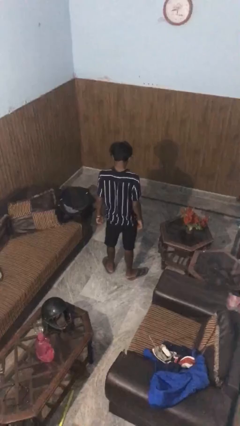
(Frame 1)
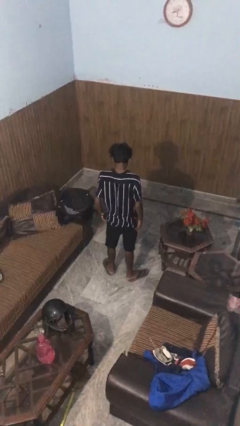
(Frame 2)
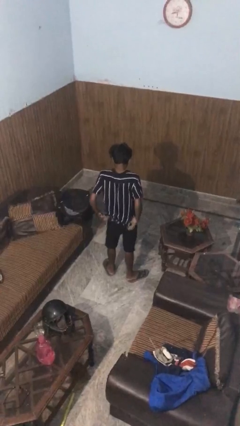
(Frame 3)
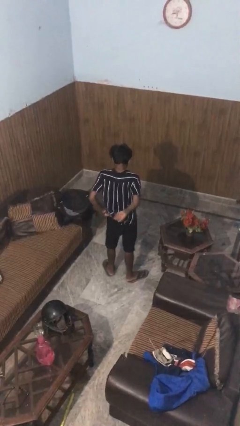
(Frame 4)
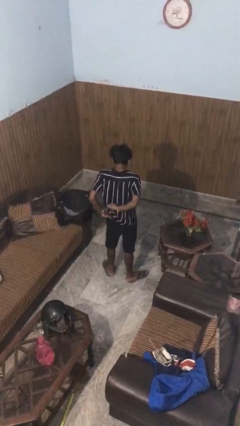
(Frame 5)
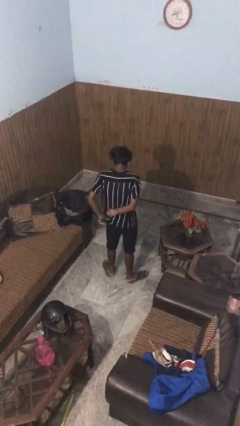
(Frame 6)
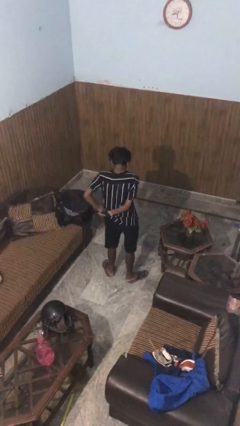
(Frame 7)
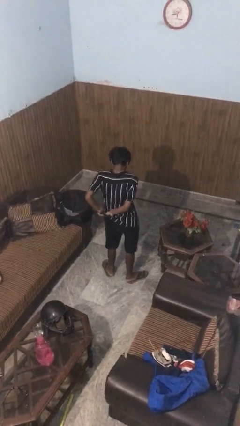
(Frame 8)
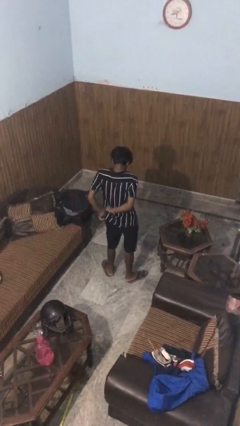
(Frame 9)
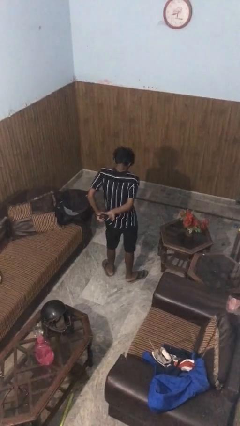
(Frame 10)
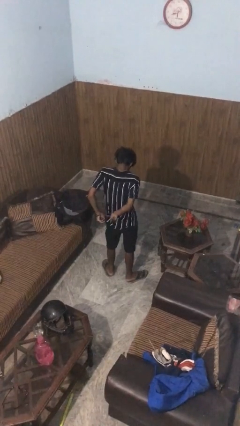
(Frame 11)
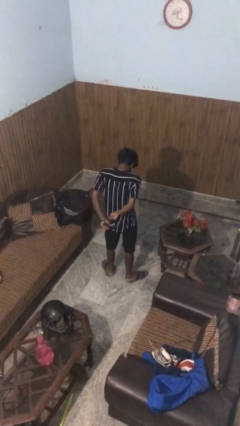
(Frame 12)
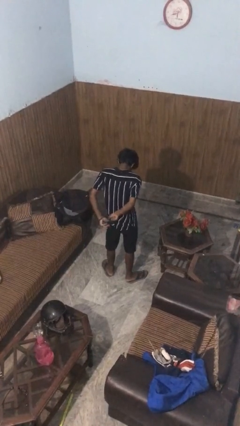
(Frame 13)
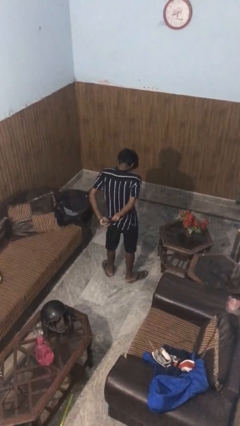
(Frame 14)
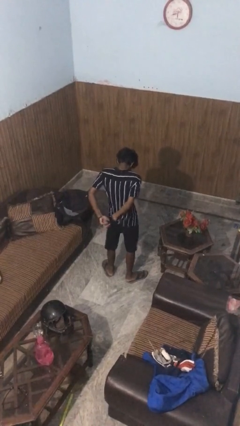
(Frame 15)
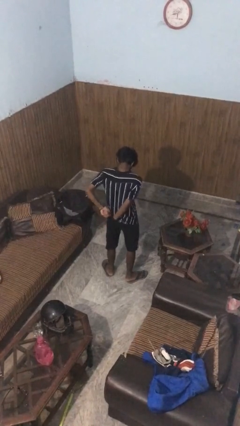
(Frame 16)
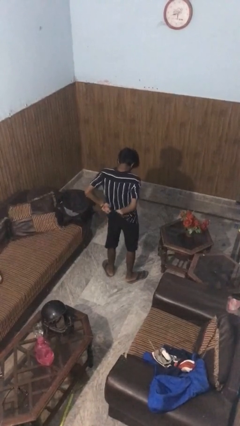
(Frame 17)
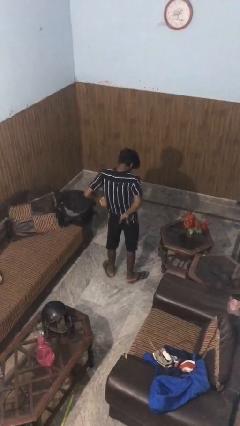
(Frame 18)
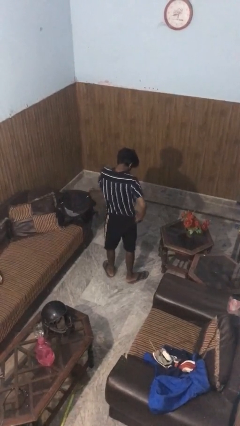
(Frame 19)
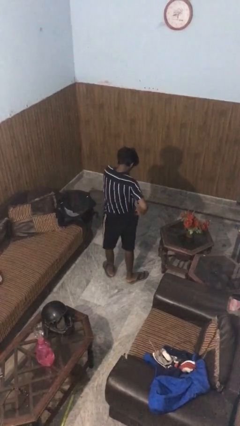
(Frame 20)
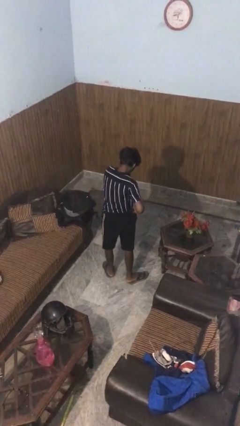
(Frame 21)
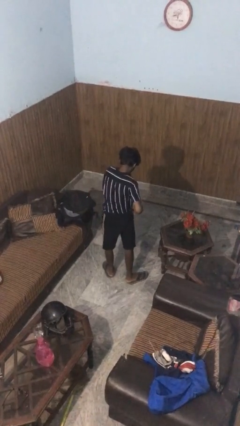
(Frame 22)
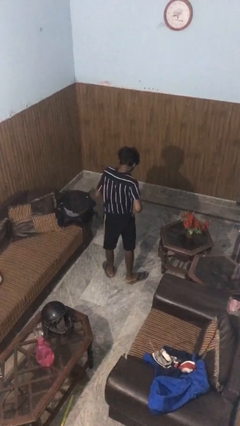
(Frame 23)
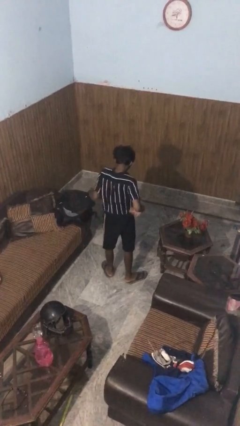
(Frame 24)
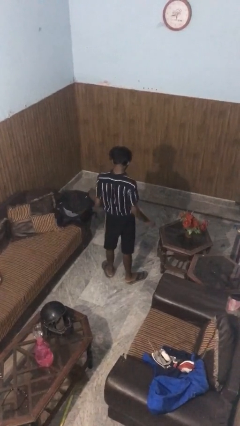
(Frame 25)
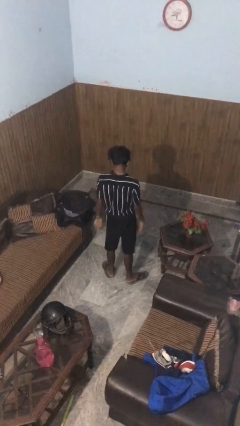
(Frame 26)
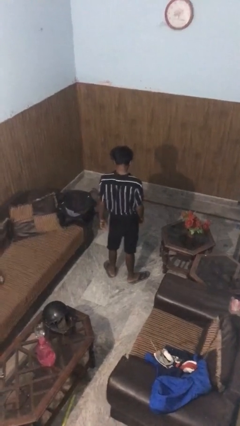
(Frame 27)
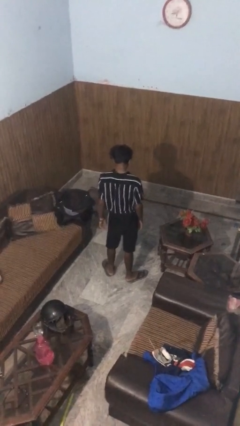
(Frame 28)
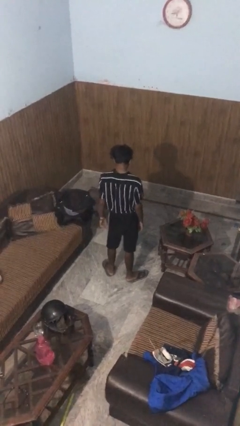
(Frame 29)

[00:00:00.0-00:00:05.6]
person tucks in shirt

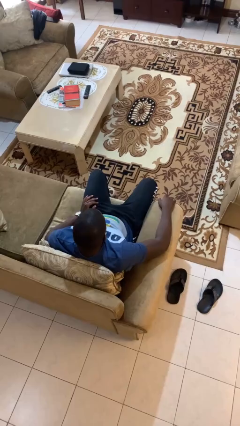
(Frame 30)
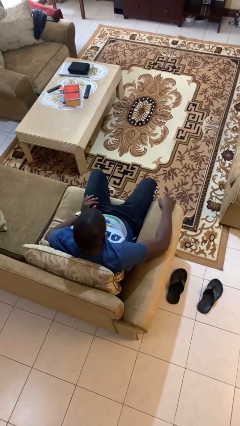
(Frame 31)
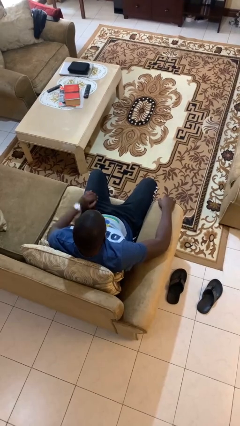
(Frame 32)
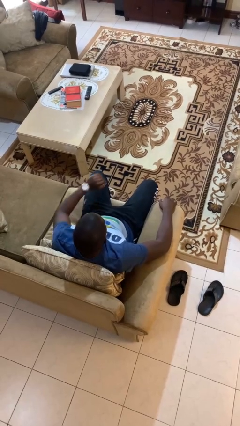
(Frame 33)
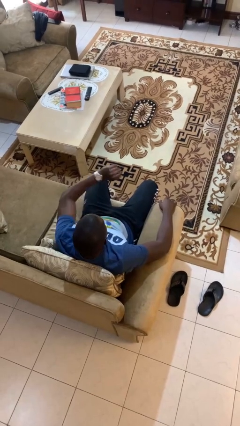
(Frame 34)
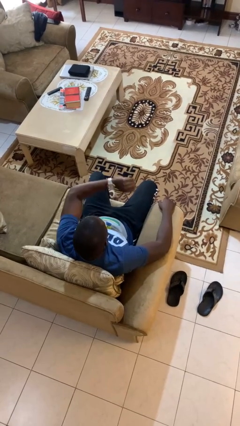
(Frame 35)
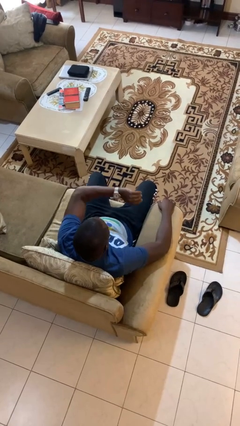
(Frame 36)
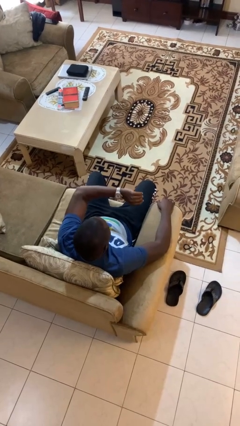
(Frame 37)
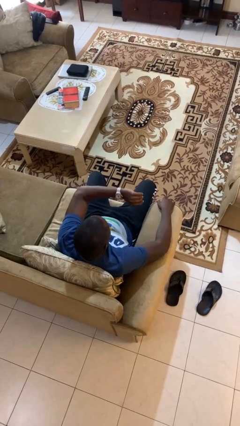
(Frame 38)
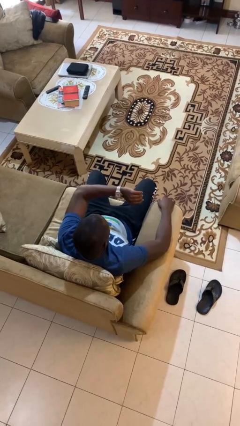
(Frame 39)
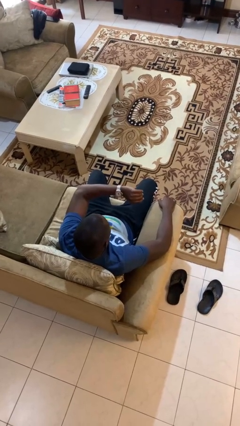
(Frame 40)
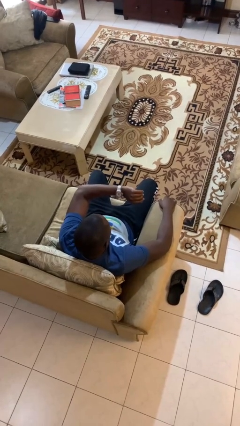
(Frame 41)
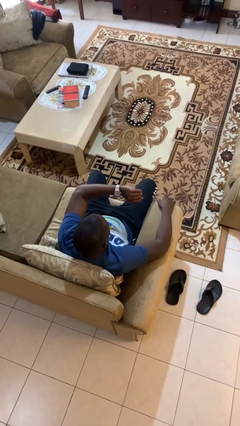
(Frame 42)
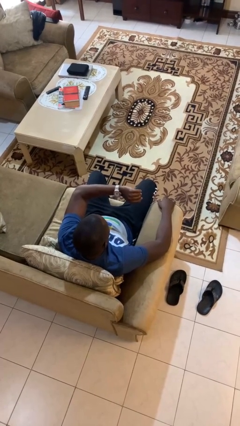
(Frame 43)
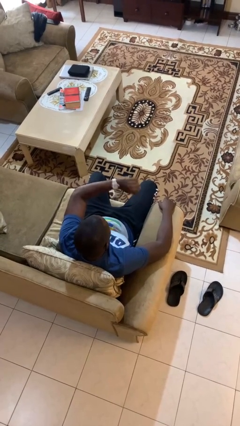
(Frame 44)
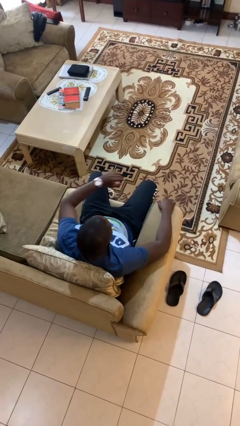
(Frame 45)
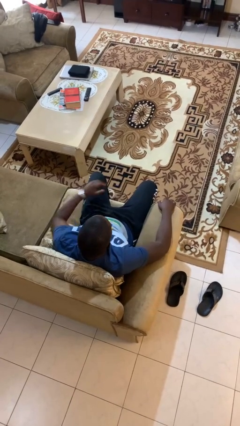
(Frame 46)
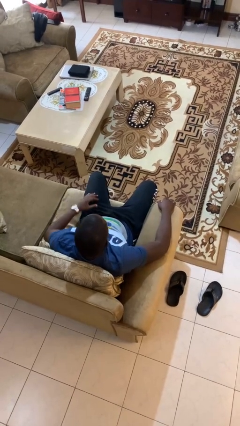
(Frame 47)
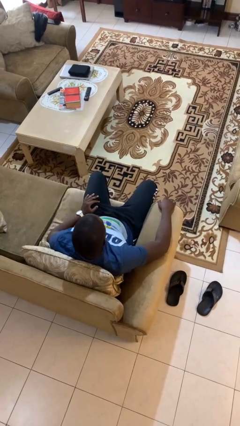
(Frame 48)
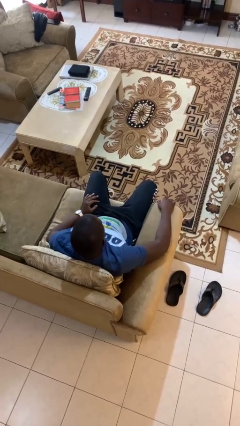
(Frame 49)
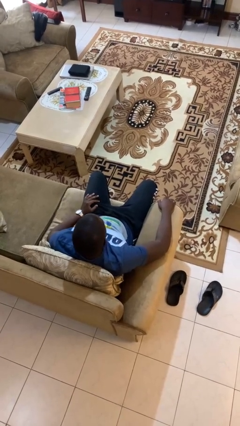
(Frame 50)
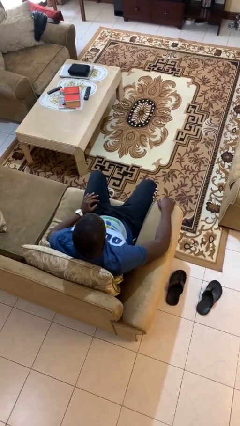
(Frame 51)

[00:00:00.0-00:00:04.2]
person looks at wristwatch

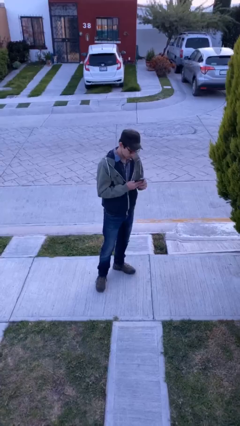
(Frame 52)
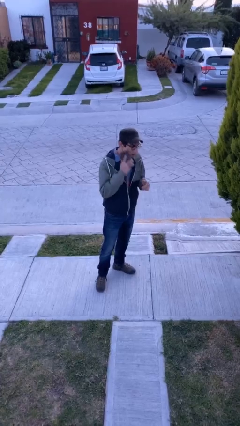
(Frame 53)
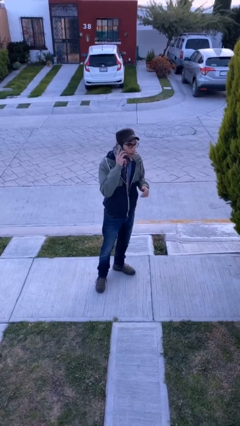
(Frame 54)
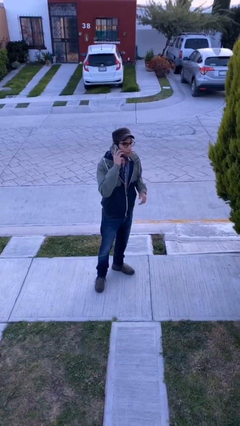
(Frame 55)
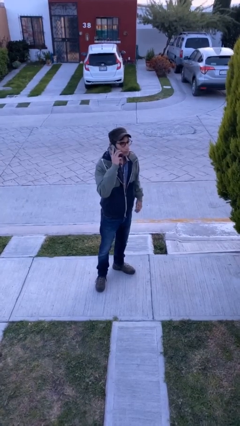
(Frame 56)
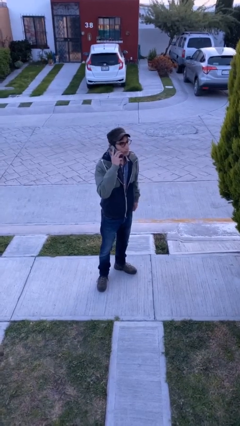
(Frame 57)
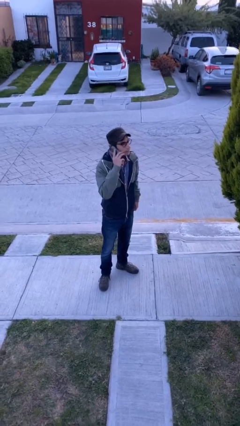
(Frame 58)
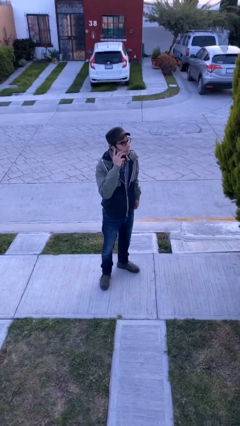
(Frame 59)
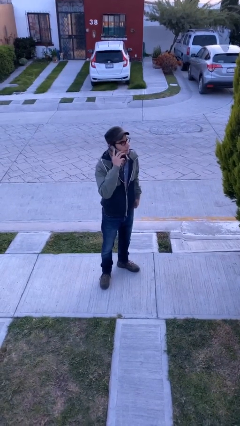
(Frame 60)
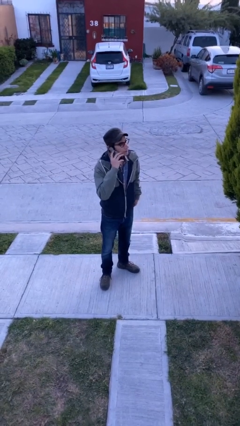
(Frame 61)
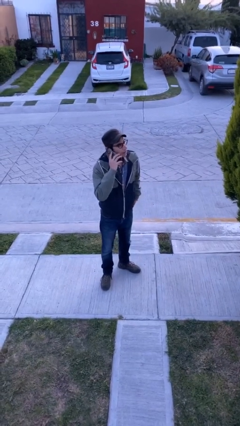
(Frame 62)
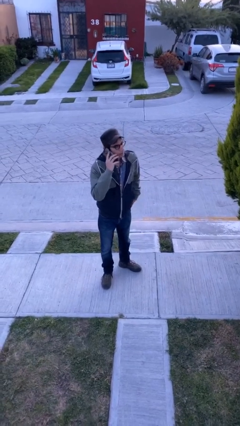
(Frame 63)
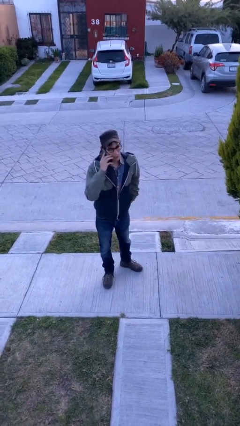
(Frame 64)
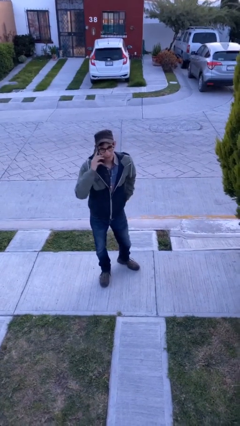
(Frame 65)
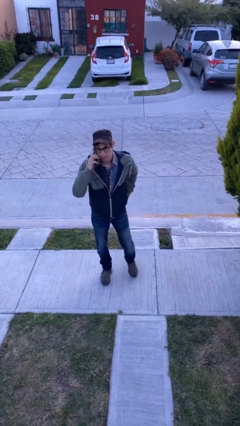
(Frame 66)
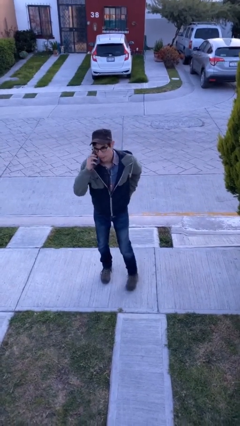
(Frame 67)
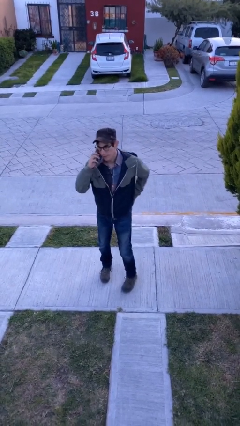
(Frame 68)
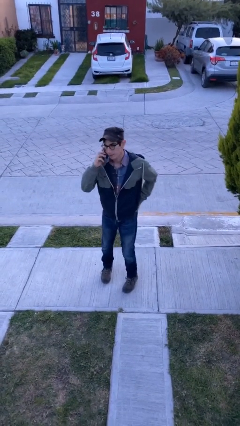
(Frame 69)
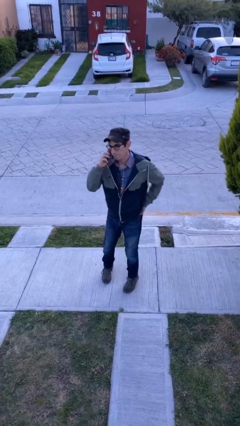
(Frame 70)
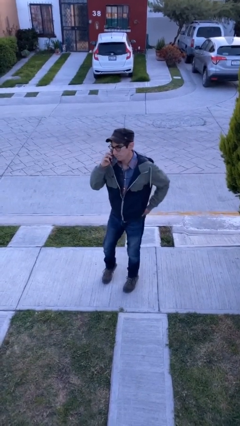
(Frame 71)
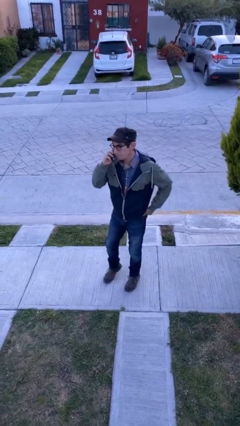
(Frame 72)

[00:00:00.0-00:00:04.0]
person talks on phone

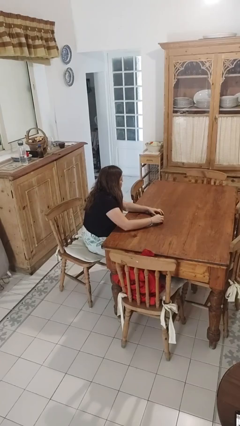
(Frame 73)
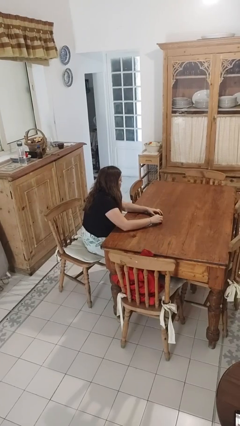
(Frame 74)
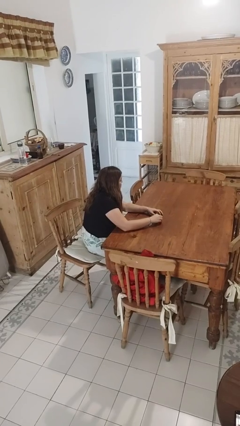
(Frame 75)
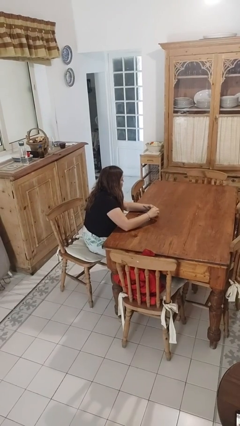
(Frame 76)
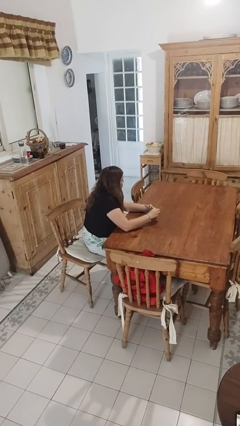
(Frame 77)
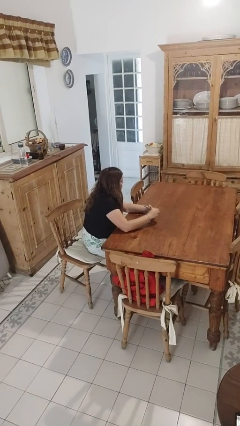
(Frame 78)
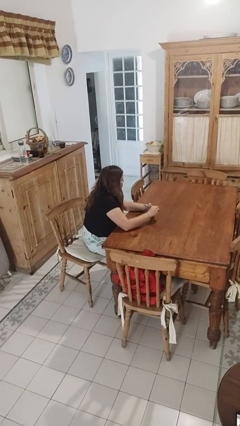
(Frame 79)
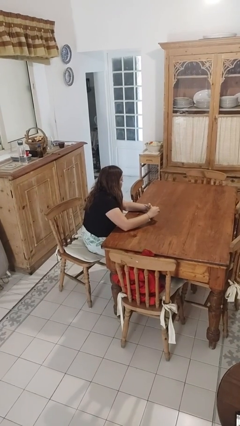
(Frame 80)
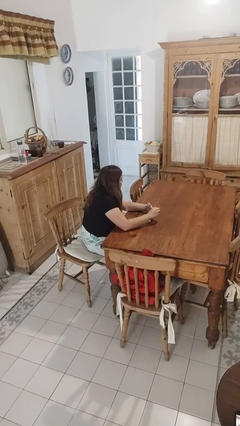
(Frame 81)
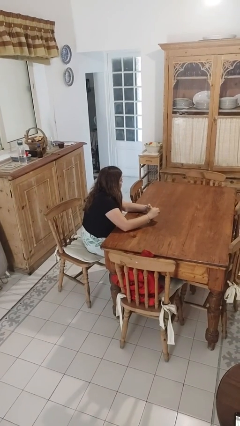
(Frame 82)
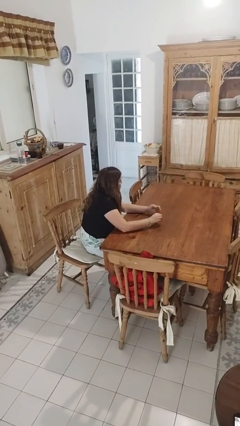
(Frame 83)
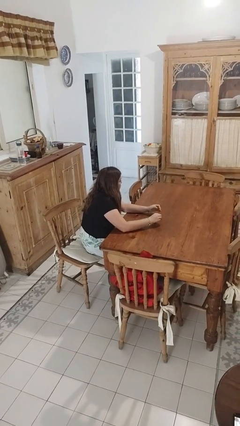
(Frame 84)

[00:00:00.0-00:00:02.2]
person files fingernails

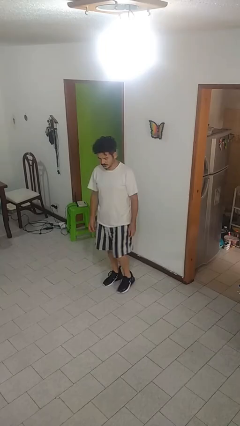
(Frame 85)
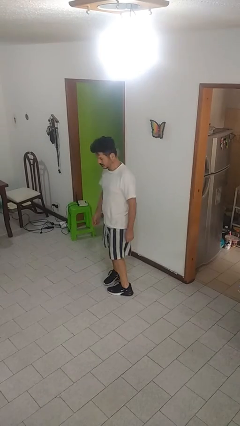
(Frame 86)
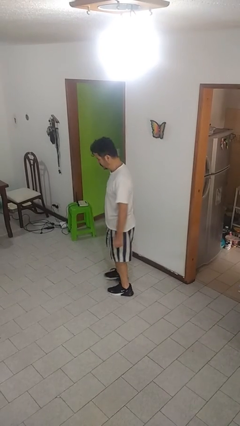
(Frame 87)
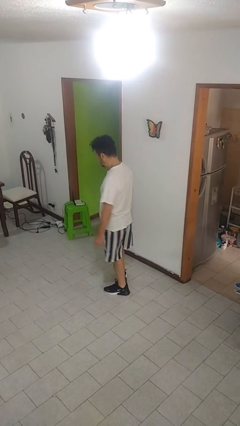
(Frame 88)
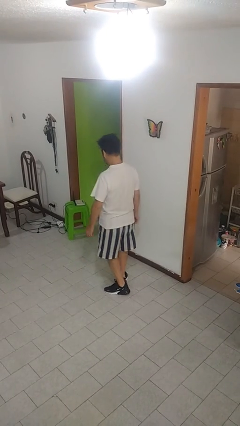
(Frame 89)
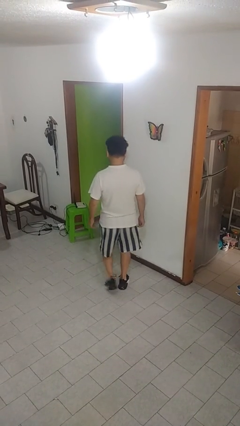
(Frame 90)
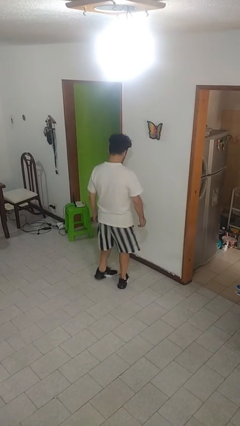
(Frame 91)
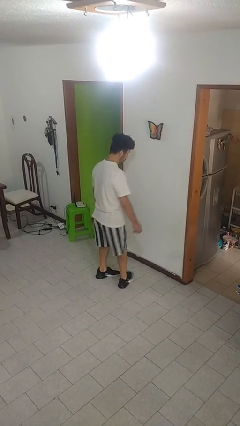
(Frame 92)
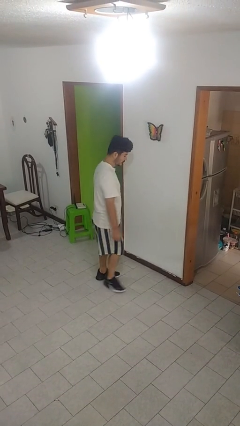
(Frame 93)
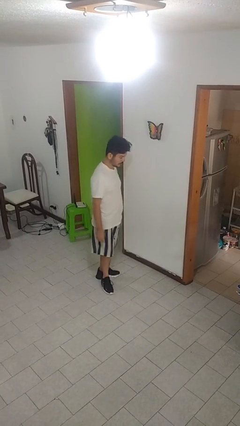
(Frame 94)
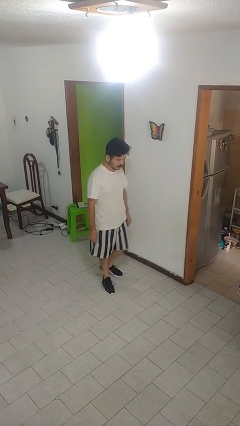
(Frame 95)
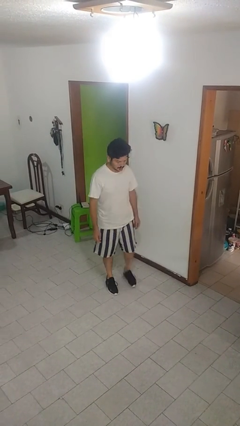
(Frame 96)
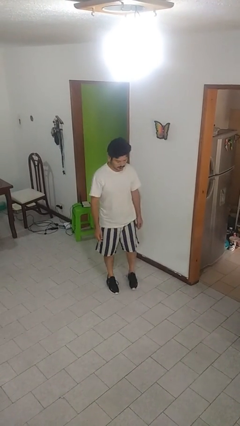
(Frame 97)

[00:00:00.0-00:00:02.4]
person twirls
